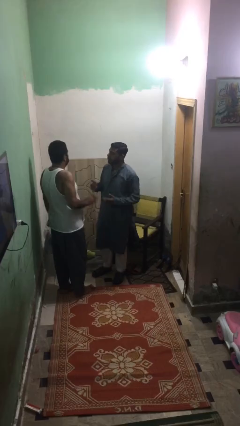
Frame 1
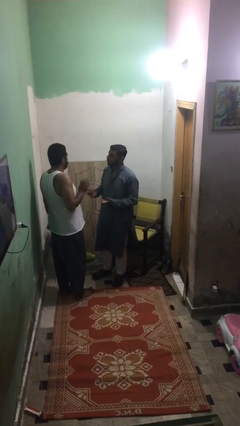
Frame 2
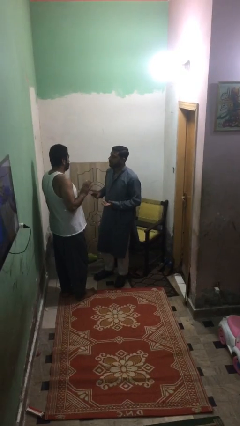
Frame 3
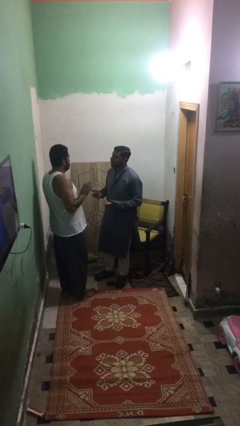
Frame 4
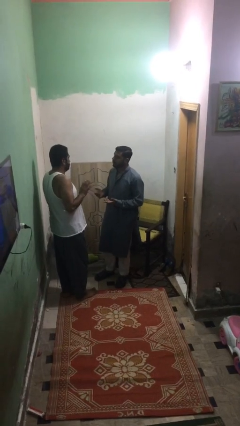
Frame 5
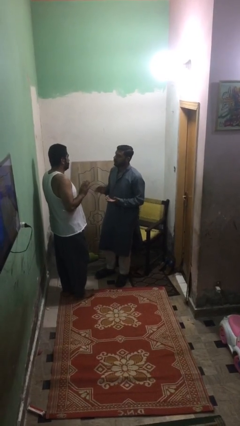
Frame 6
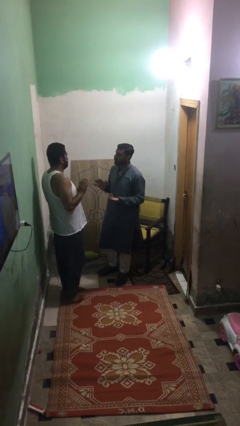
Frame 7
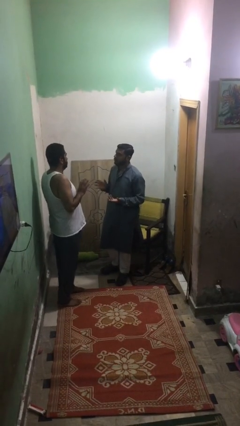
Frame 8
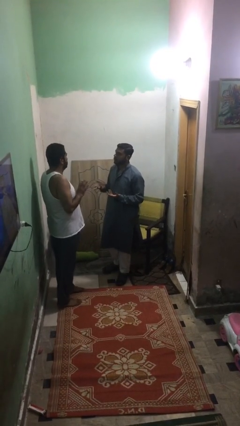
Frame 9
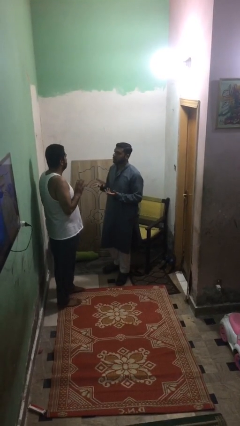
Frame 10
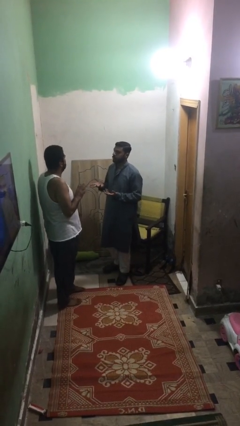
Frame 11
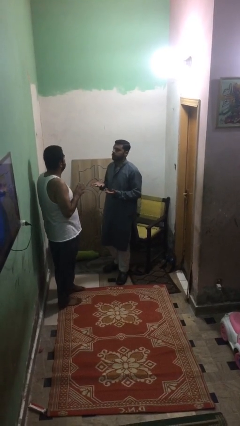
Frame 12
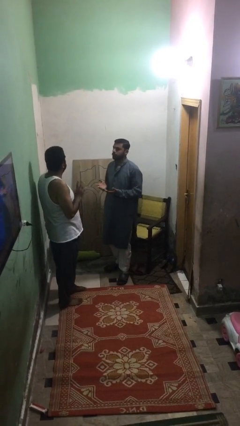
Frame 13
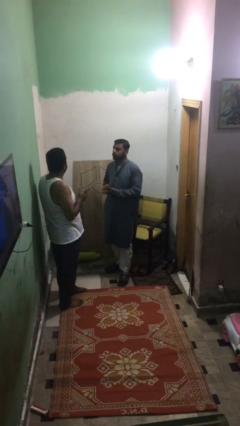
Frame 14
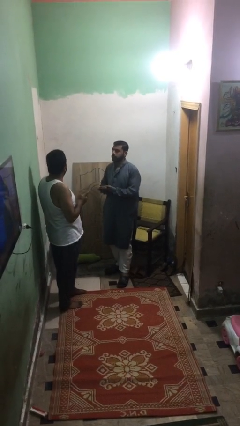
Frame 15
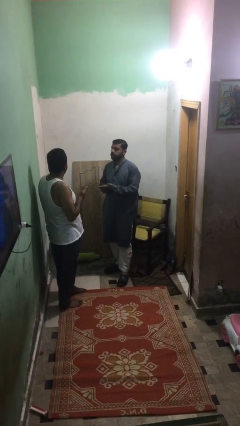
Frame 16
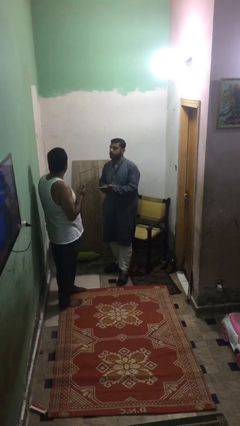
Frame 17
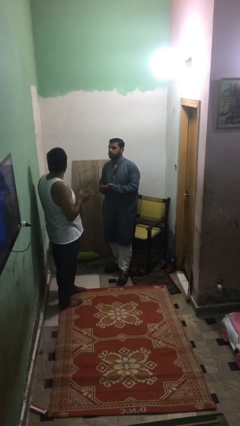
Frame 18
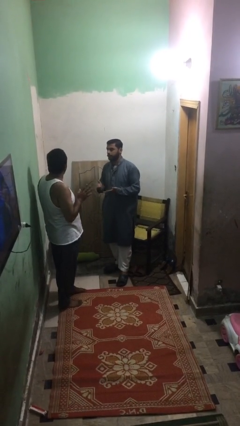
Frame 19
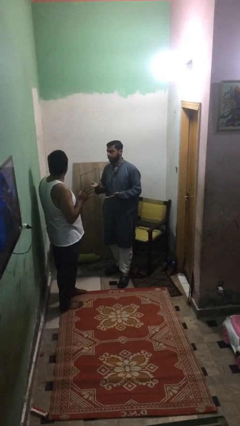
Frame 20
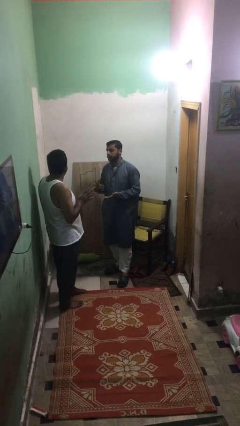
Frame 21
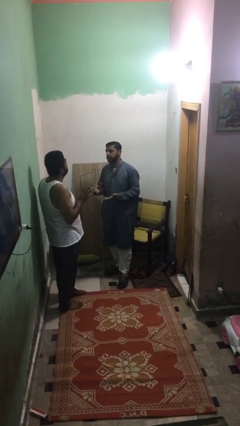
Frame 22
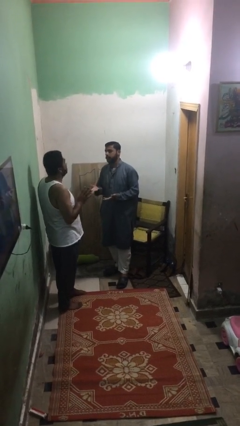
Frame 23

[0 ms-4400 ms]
person talks to person

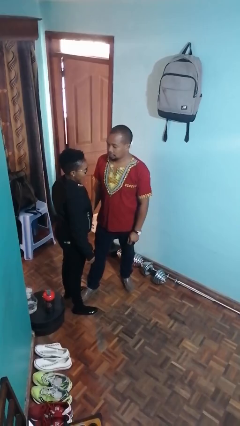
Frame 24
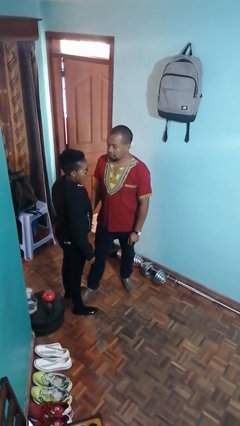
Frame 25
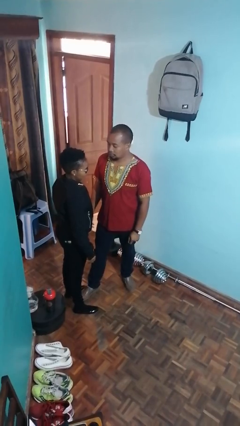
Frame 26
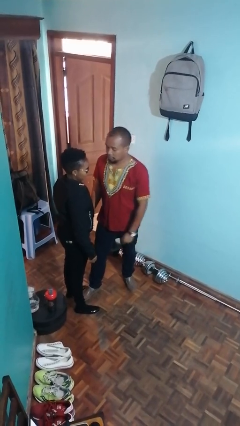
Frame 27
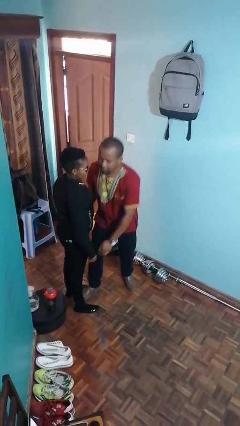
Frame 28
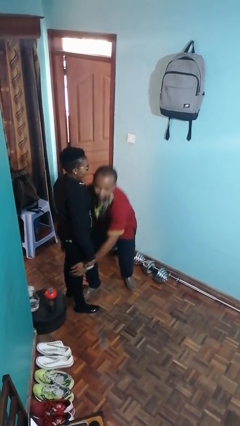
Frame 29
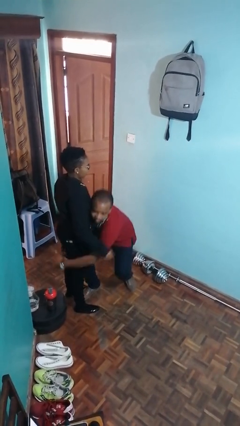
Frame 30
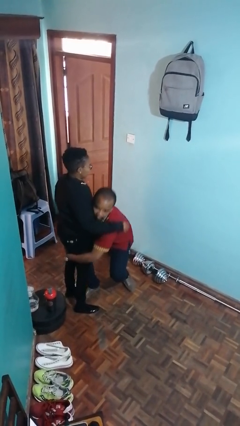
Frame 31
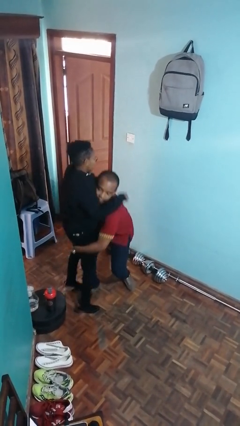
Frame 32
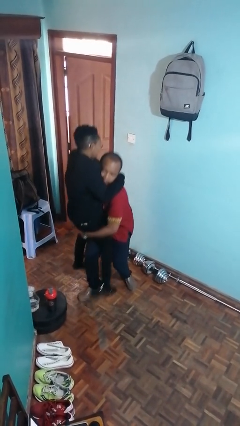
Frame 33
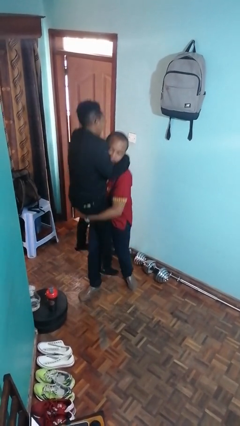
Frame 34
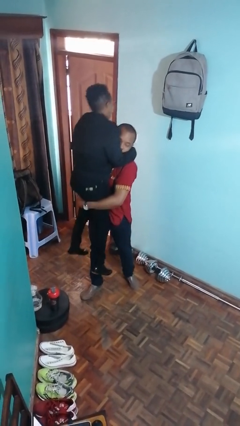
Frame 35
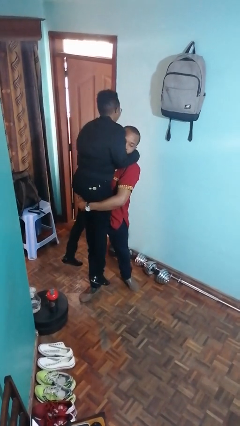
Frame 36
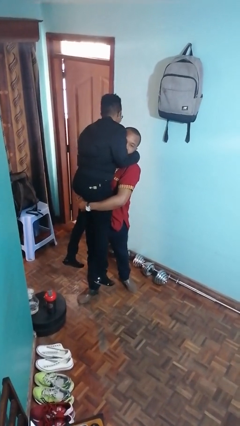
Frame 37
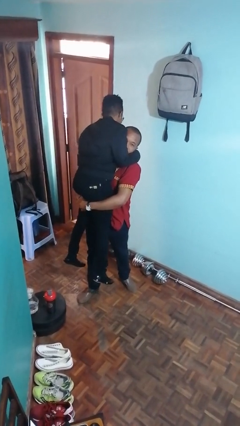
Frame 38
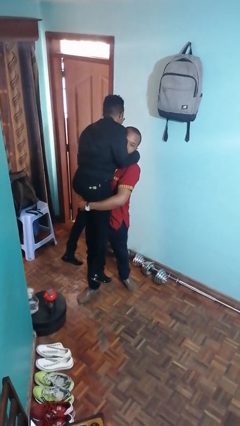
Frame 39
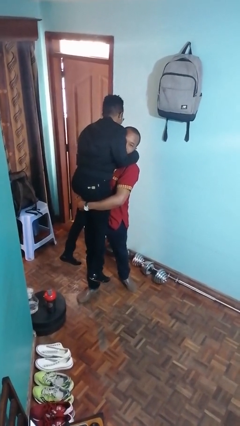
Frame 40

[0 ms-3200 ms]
person picks up person

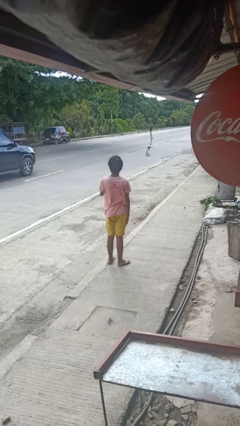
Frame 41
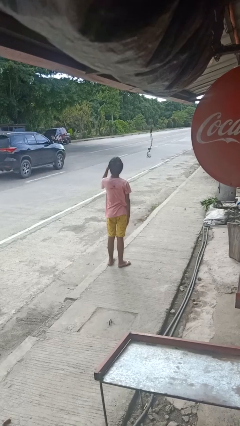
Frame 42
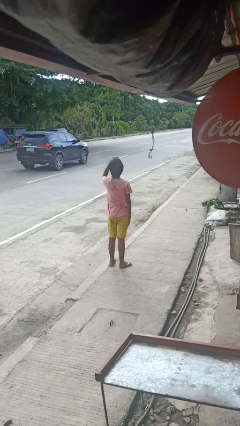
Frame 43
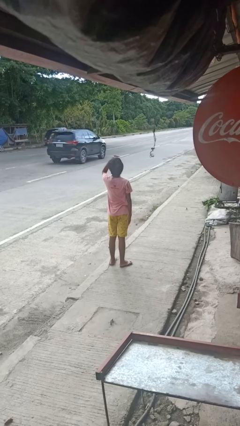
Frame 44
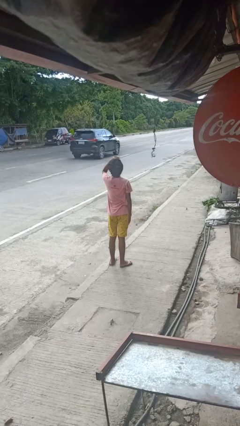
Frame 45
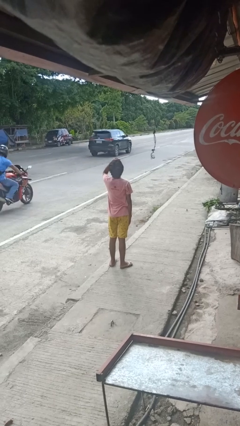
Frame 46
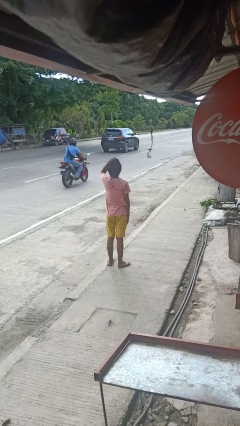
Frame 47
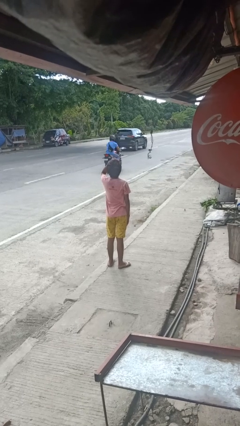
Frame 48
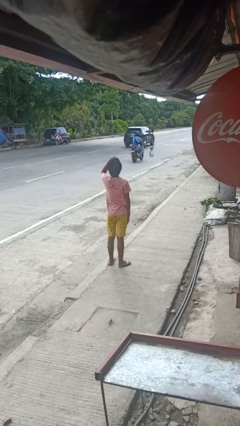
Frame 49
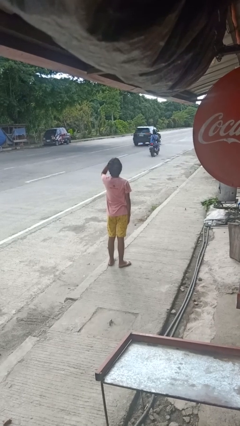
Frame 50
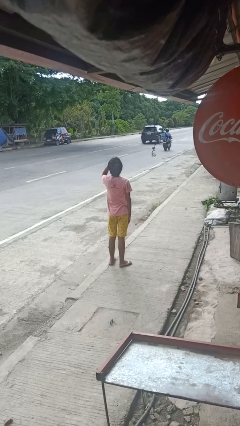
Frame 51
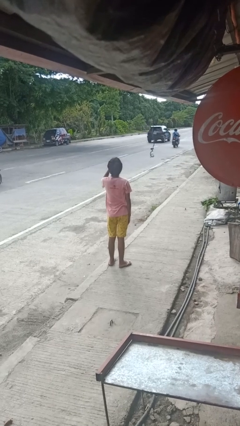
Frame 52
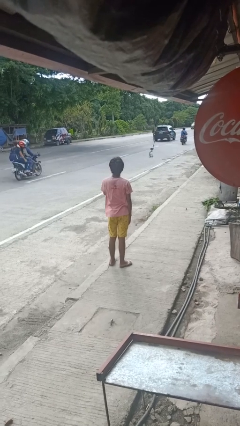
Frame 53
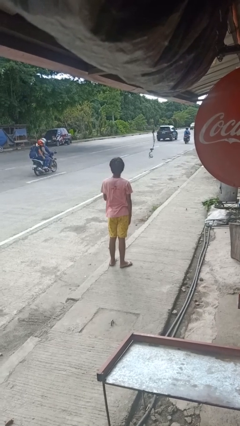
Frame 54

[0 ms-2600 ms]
person shades eyes

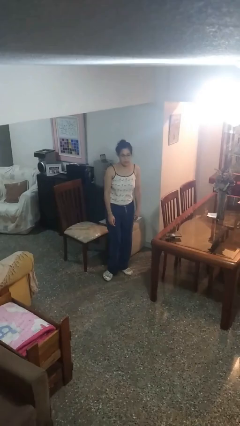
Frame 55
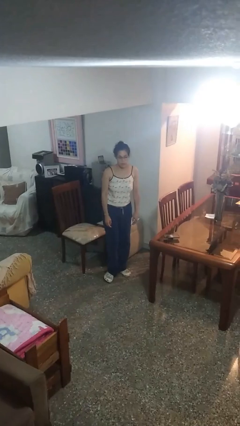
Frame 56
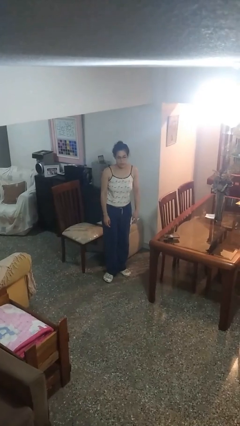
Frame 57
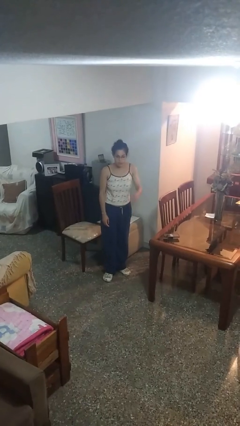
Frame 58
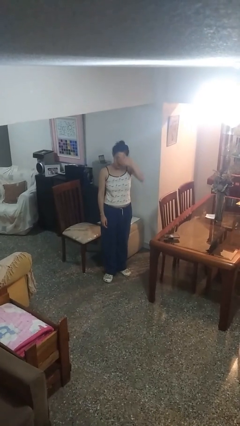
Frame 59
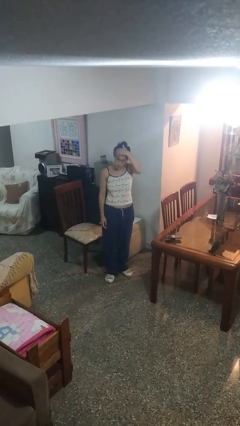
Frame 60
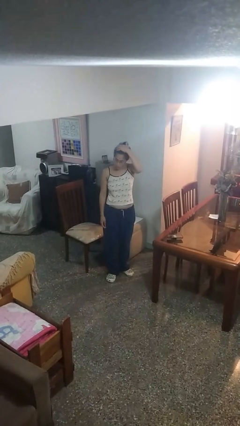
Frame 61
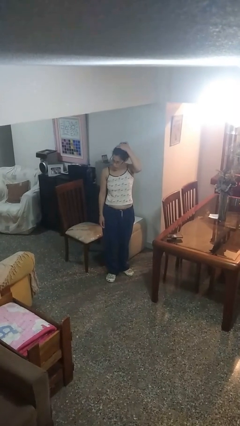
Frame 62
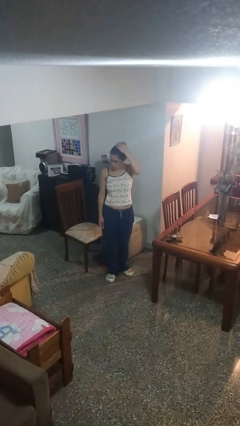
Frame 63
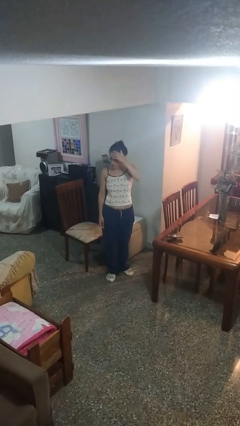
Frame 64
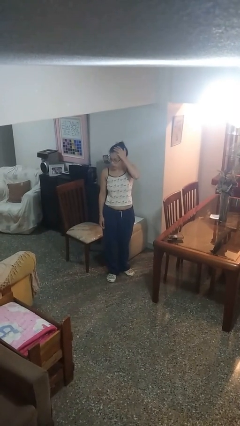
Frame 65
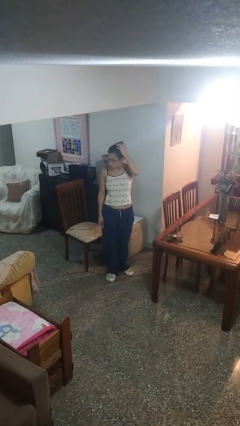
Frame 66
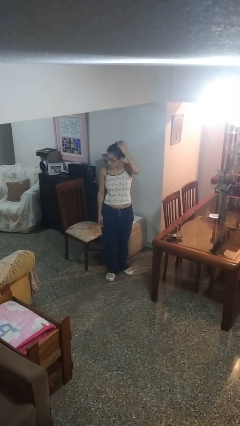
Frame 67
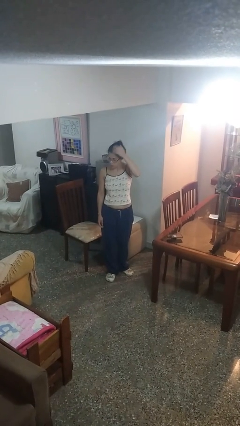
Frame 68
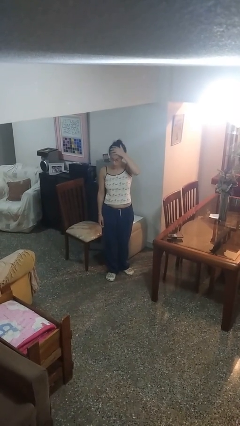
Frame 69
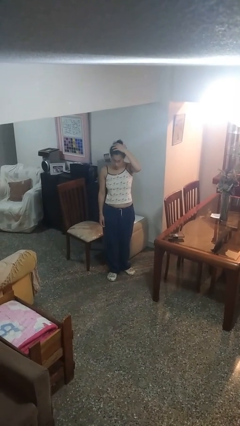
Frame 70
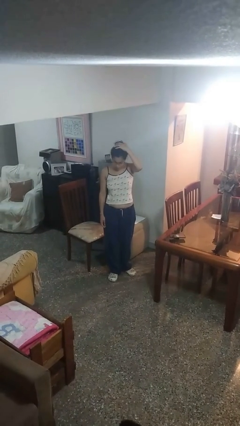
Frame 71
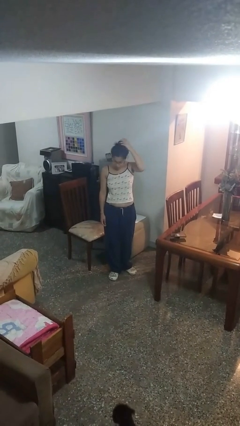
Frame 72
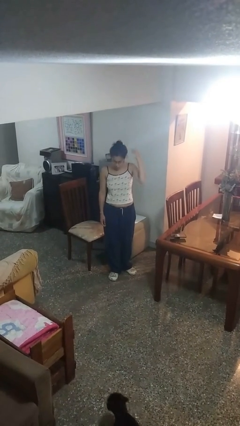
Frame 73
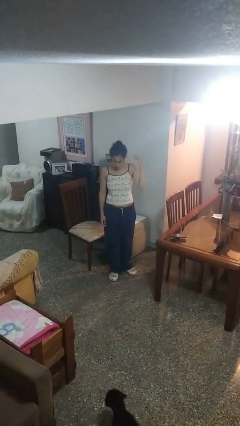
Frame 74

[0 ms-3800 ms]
person pats head

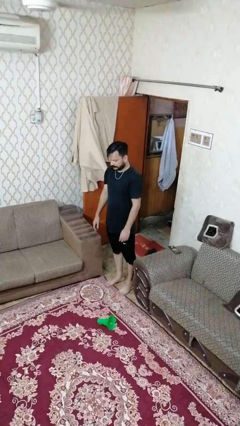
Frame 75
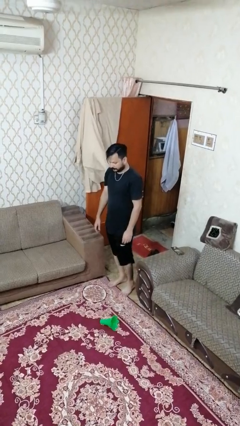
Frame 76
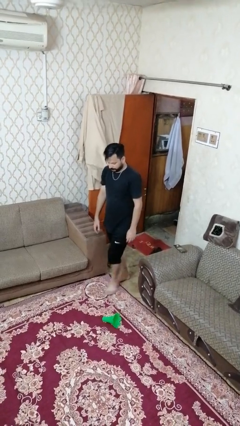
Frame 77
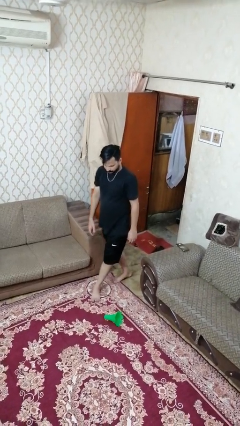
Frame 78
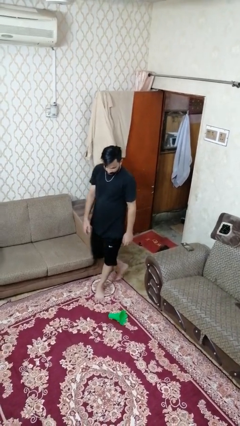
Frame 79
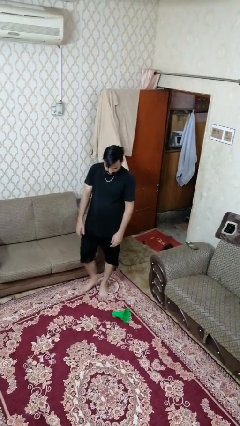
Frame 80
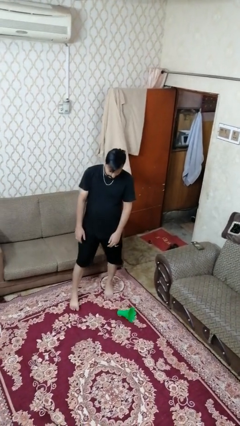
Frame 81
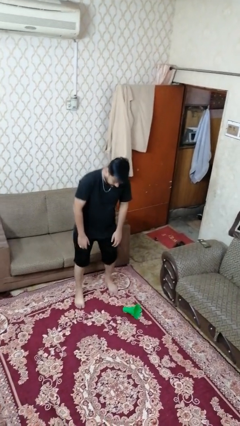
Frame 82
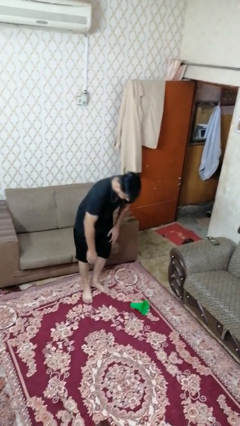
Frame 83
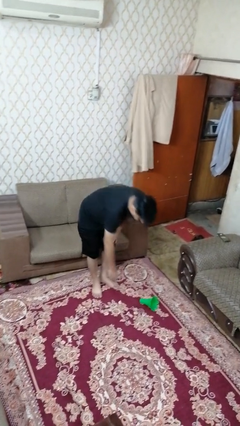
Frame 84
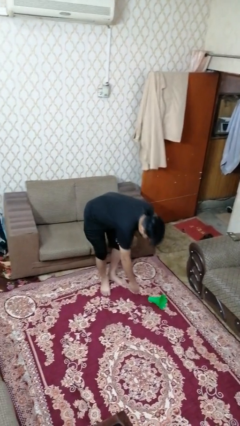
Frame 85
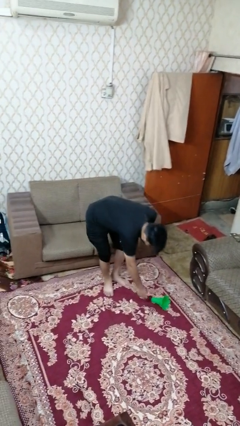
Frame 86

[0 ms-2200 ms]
person picks up object from floor

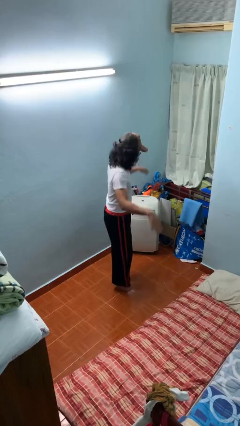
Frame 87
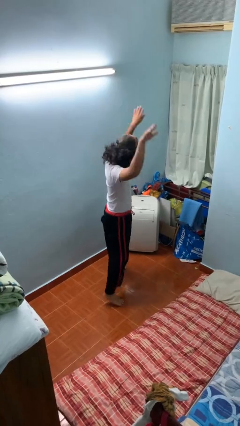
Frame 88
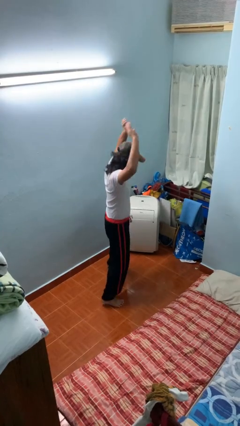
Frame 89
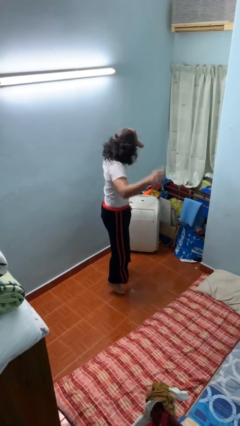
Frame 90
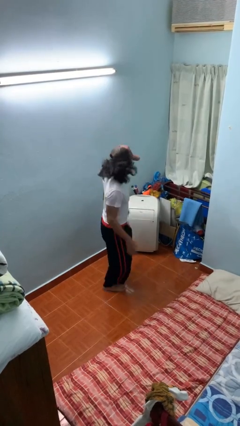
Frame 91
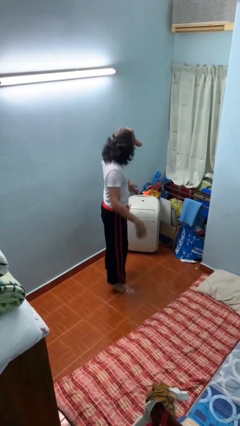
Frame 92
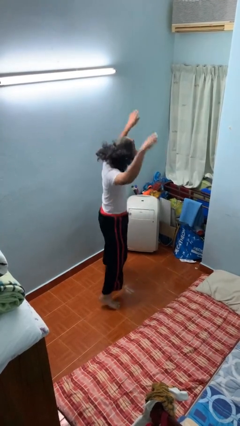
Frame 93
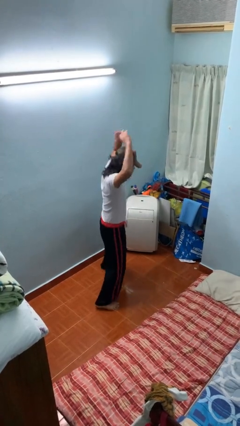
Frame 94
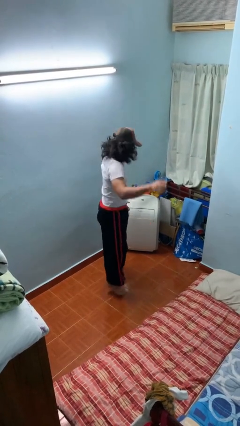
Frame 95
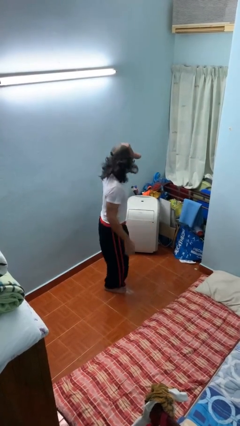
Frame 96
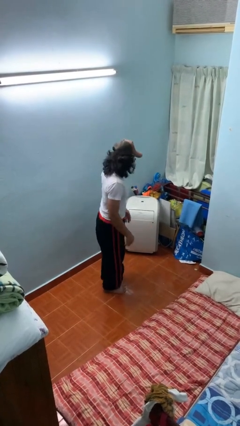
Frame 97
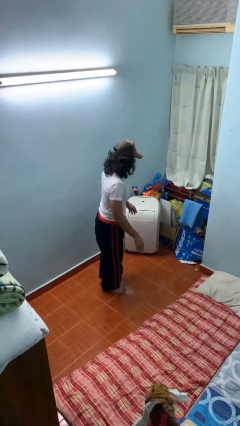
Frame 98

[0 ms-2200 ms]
person exercises with jumping jacks
